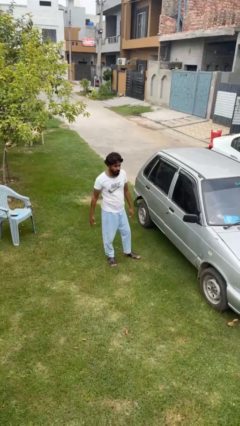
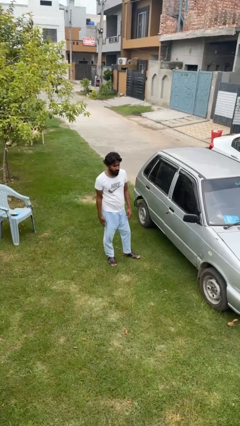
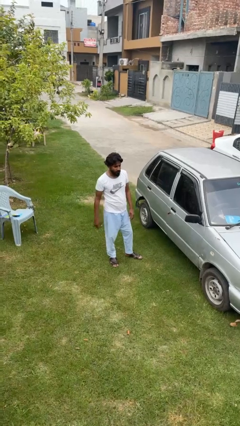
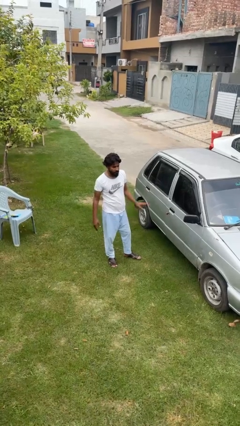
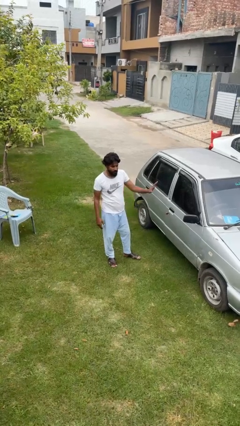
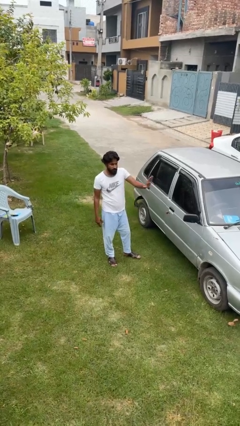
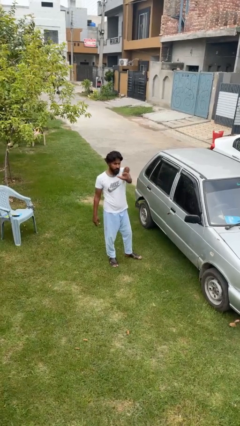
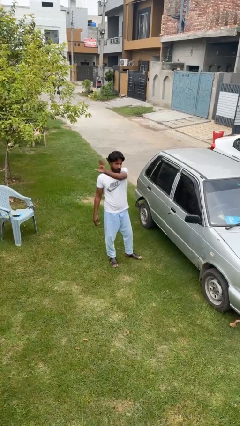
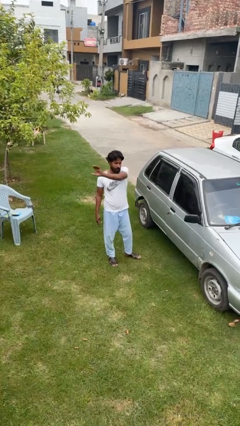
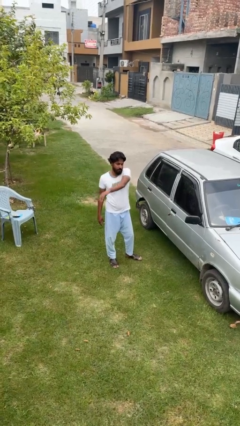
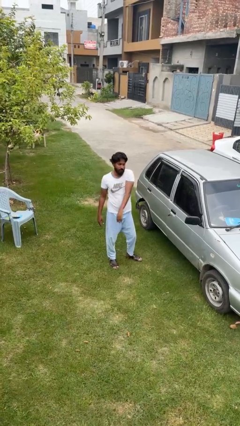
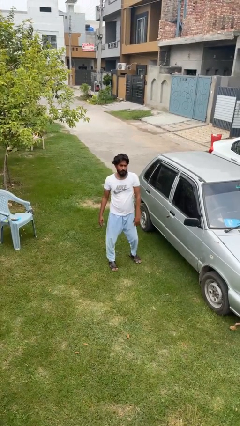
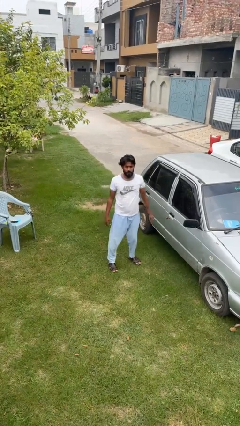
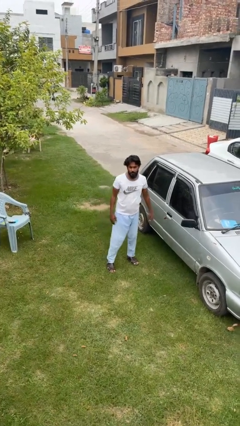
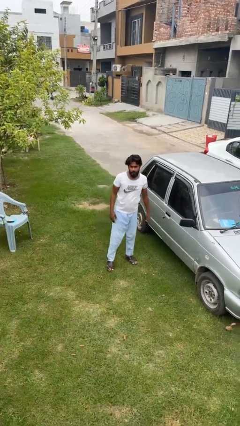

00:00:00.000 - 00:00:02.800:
person gestures swipe right

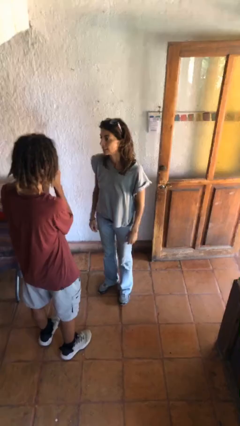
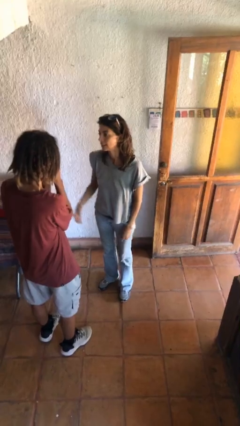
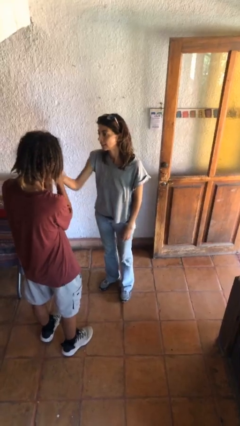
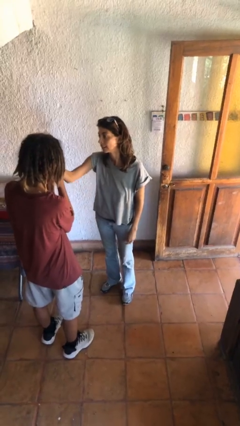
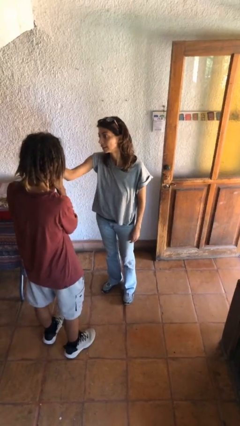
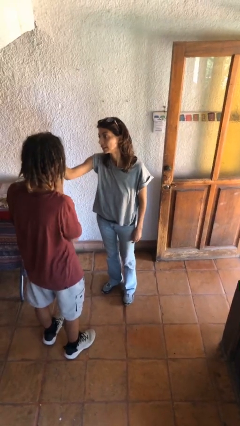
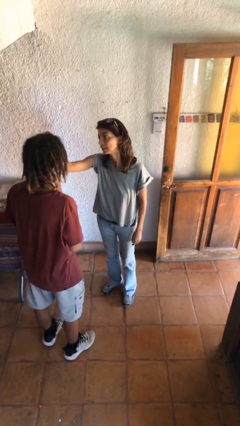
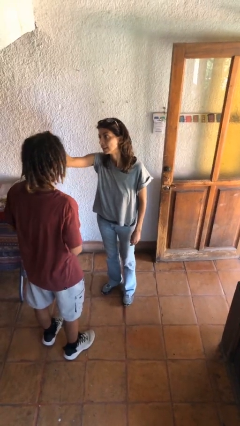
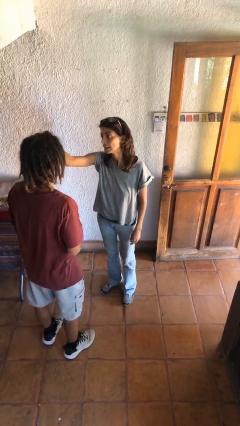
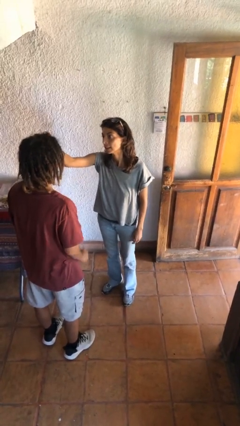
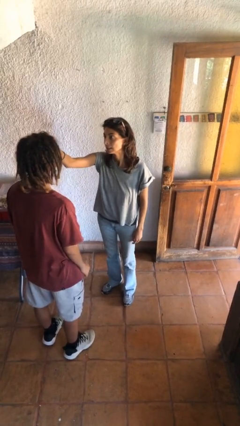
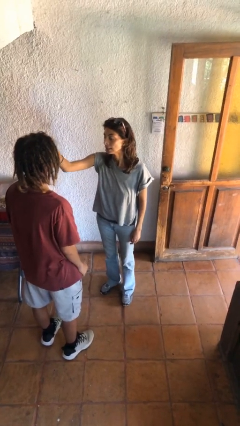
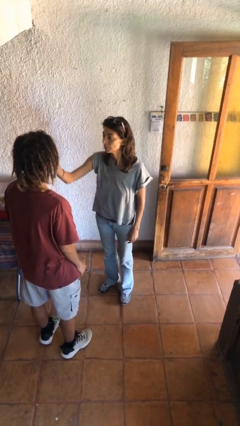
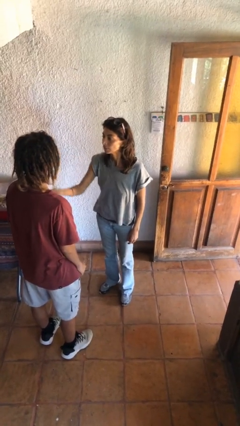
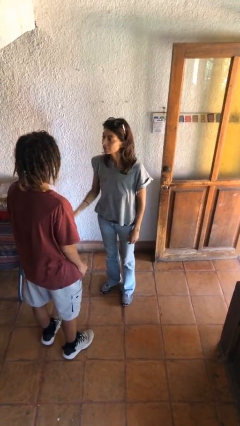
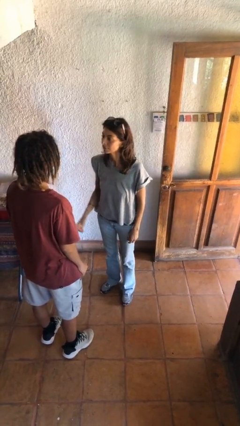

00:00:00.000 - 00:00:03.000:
person touches face of person

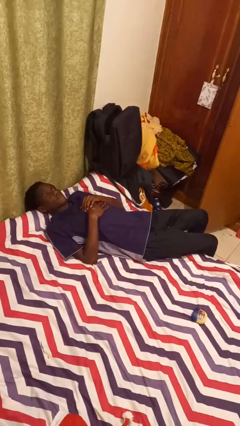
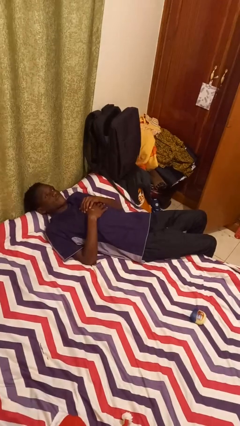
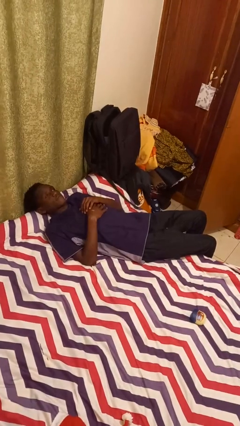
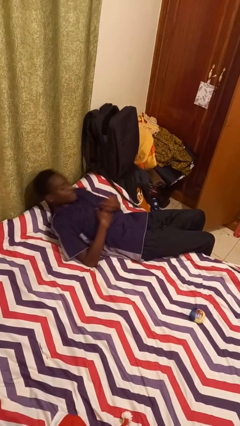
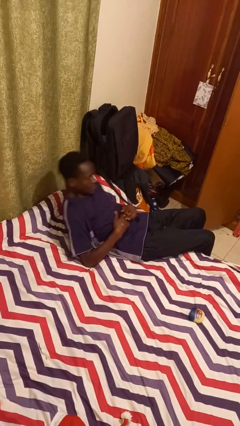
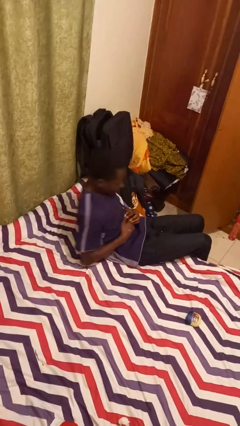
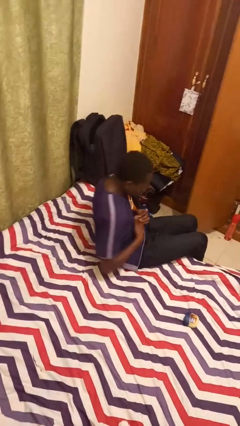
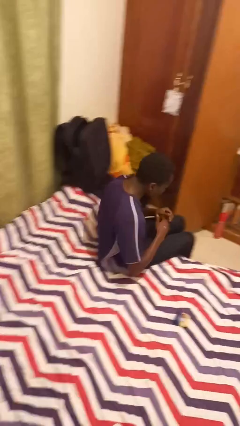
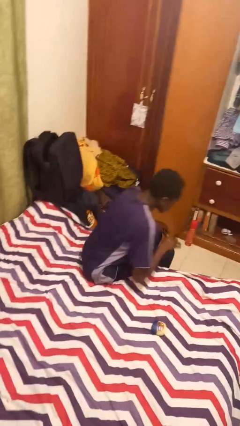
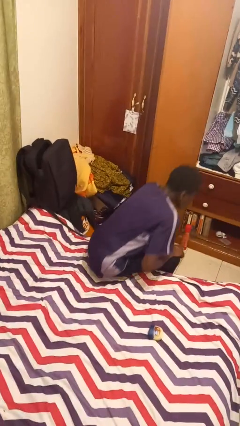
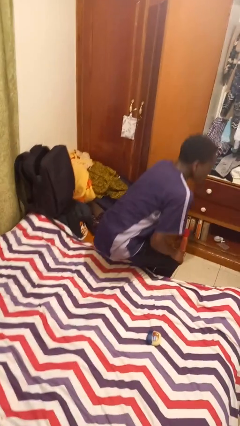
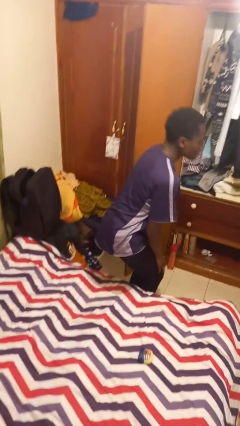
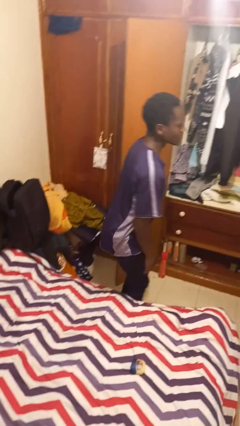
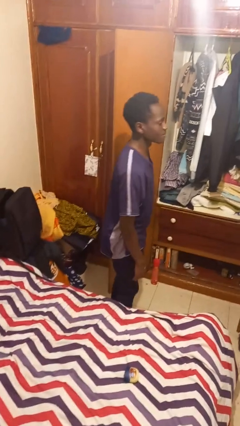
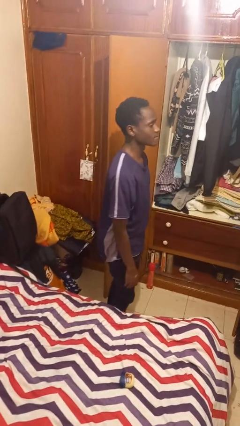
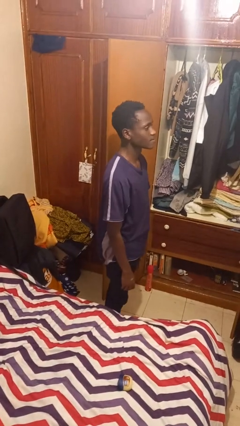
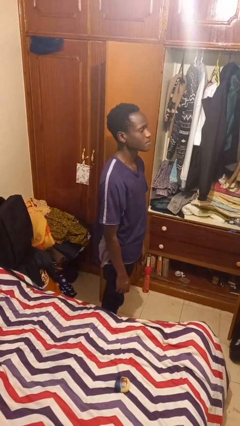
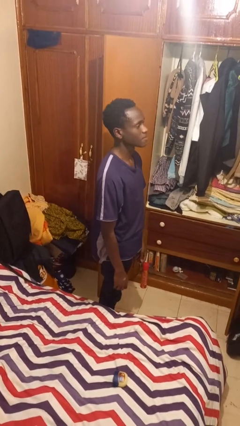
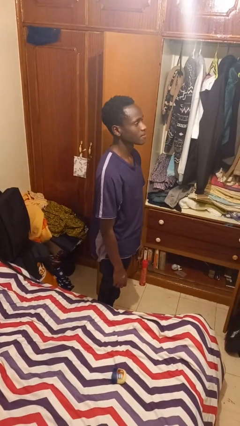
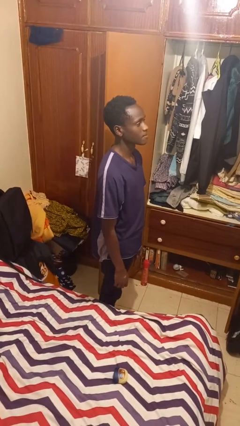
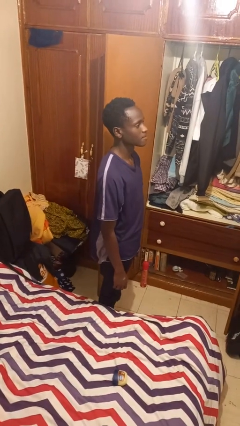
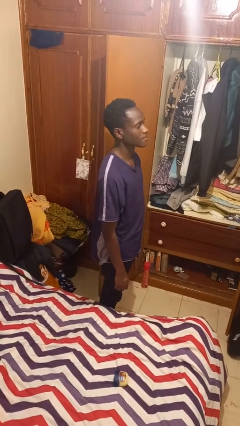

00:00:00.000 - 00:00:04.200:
person stands up

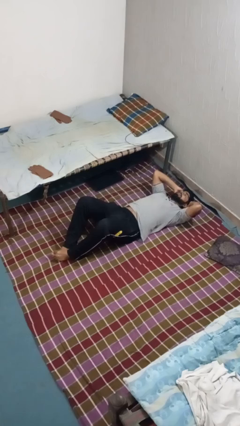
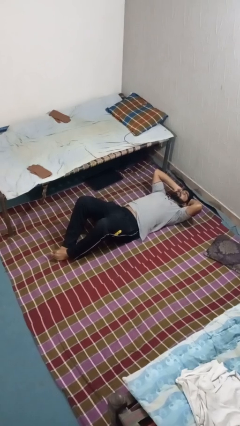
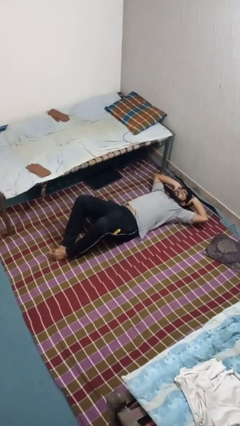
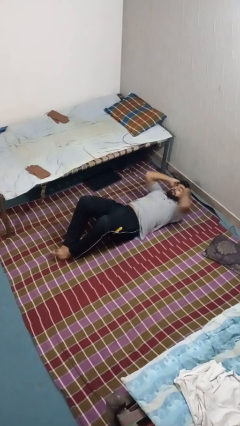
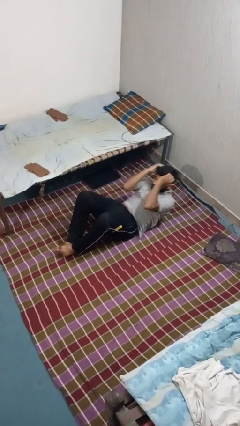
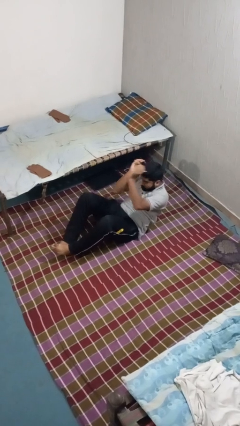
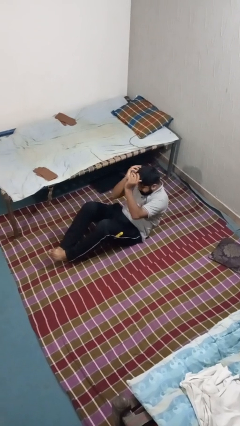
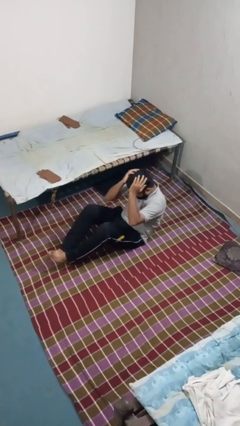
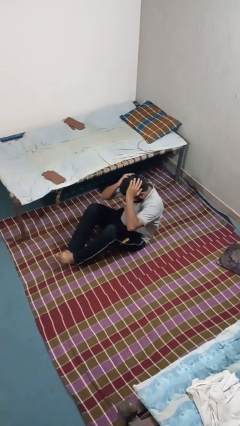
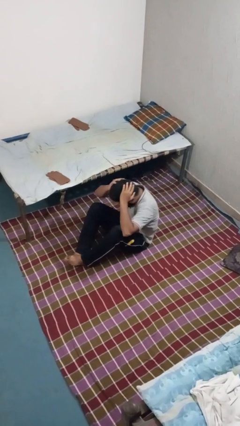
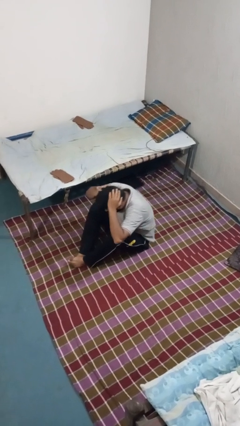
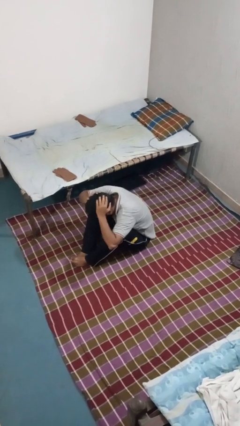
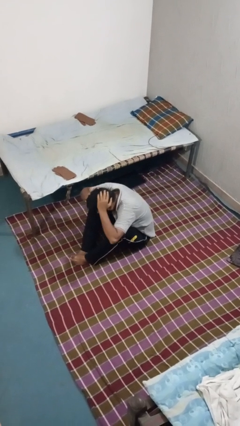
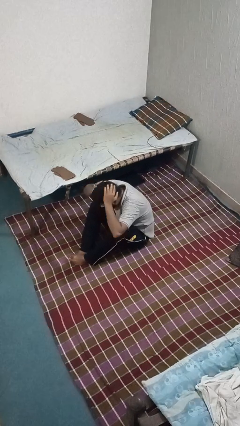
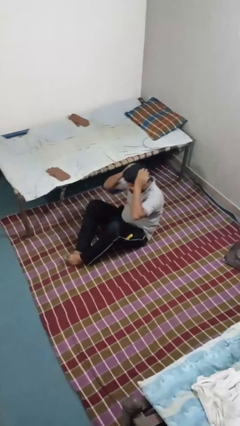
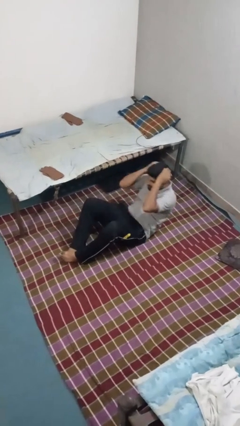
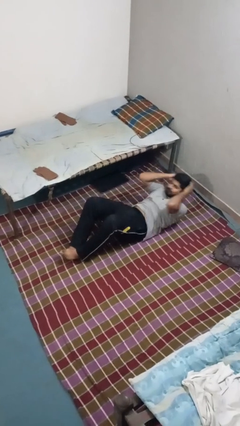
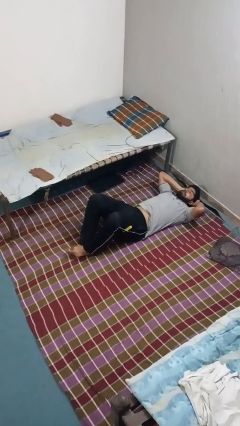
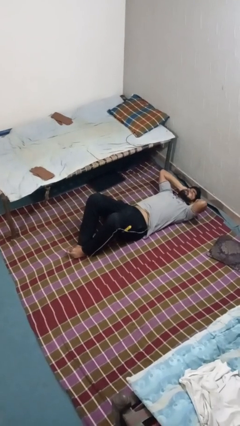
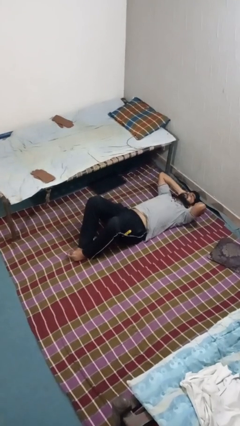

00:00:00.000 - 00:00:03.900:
person exercises with situp

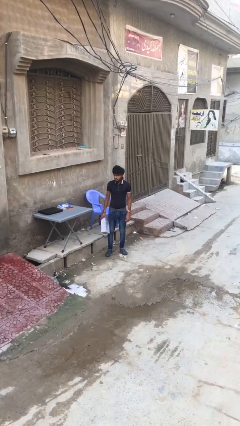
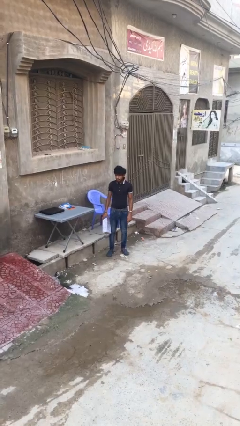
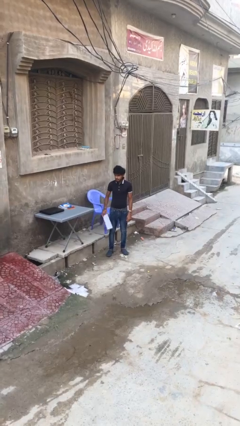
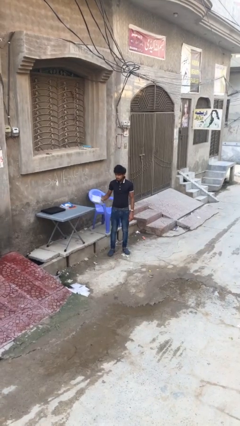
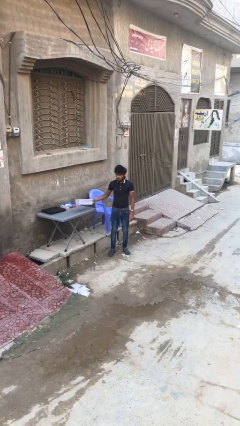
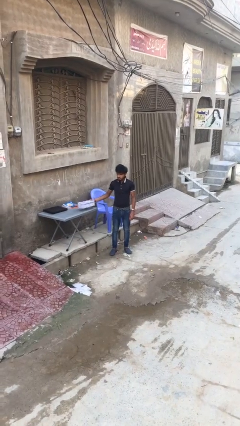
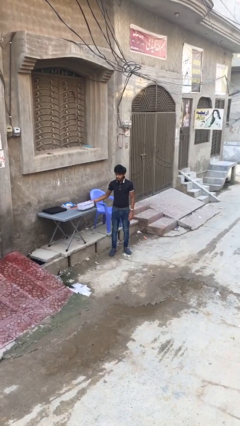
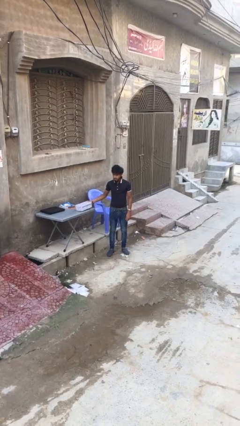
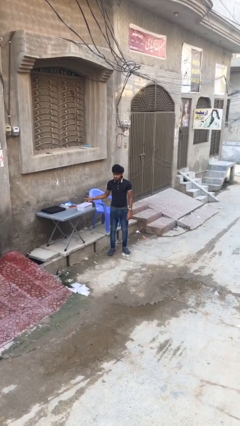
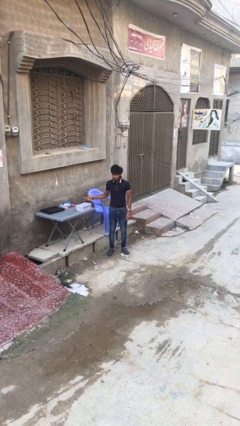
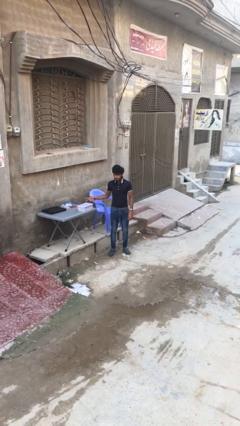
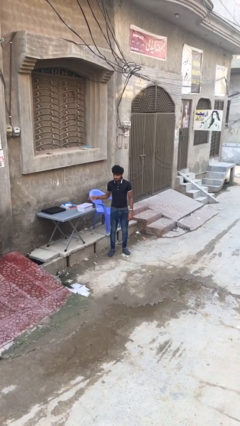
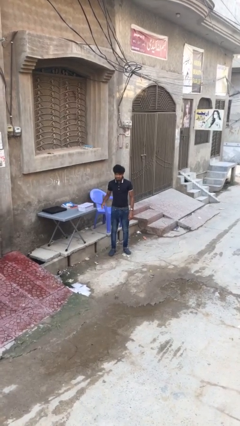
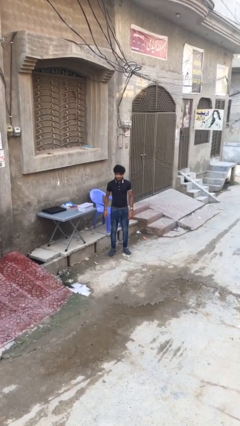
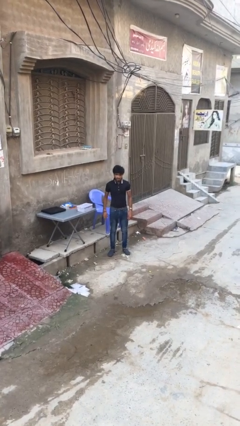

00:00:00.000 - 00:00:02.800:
person puts down object on table

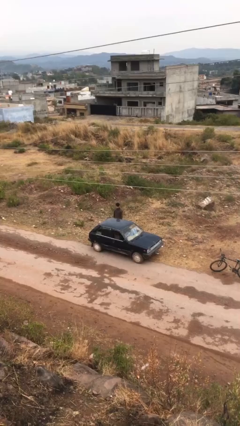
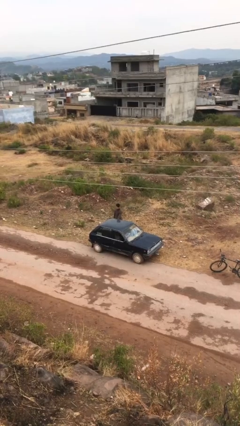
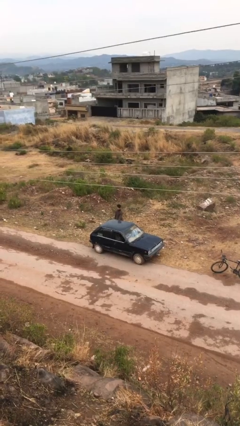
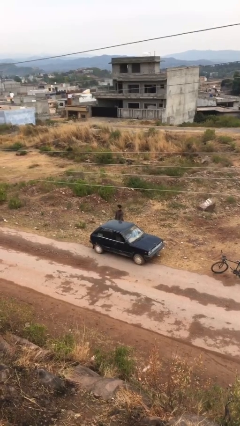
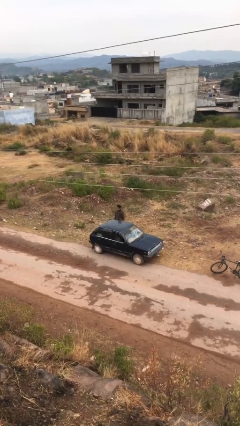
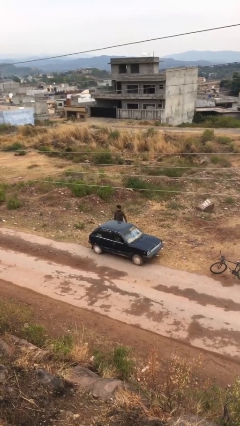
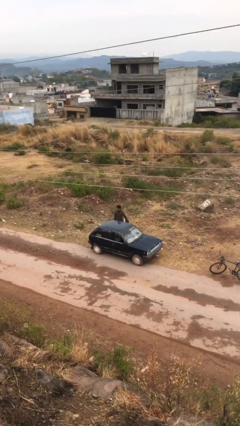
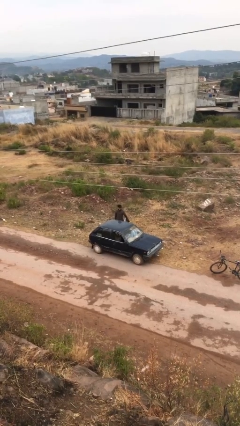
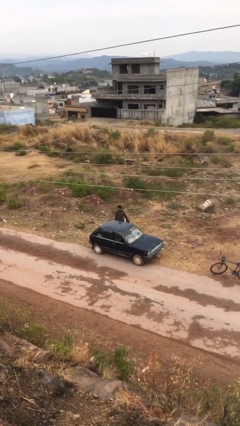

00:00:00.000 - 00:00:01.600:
person opens car door
